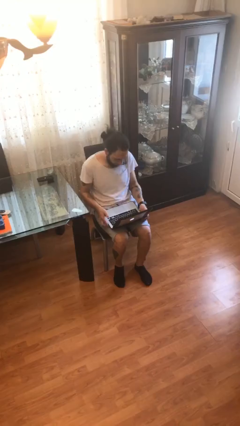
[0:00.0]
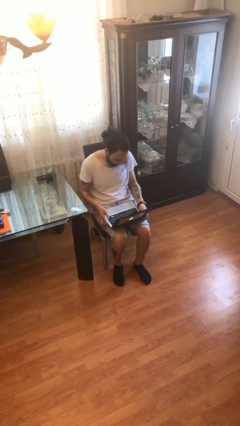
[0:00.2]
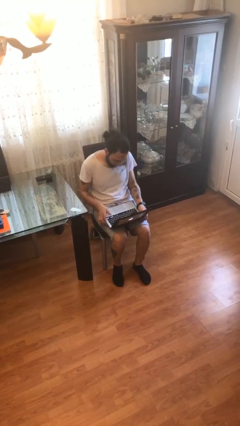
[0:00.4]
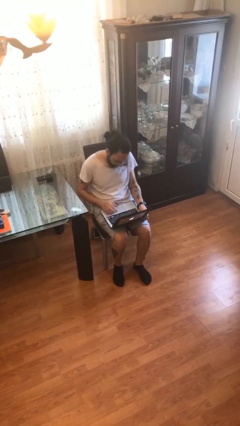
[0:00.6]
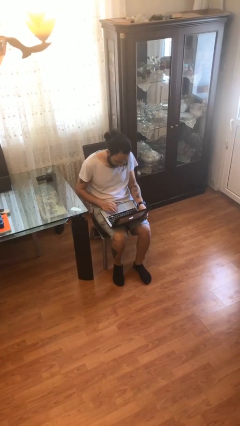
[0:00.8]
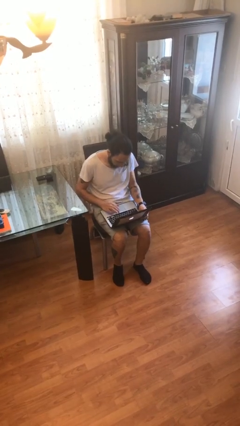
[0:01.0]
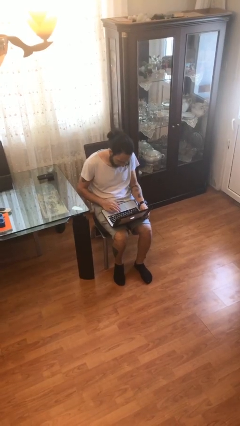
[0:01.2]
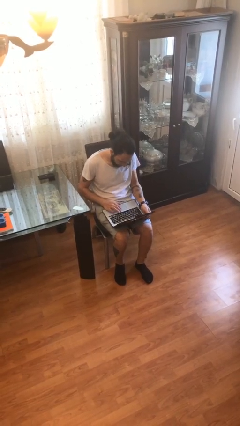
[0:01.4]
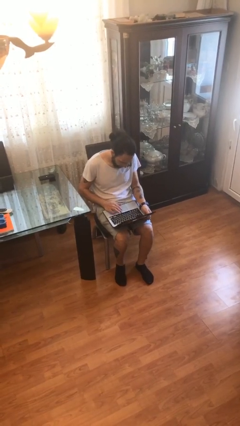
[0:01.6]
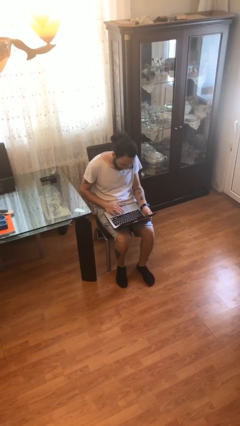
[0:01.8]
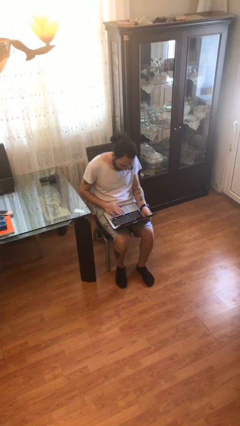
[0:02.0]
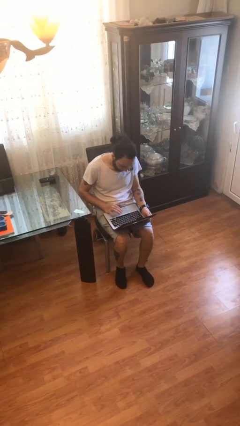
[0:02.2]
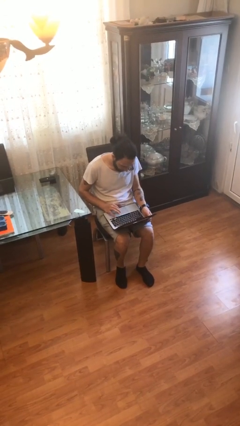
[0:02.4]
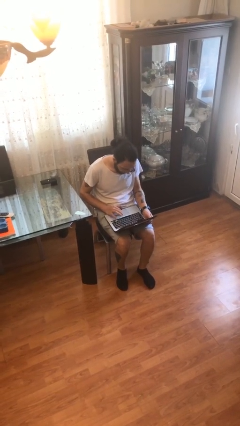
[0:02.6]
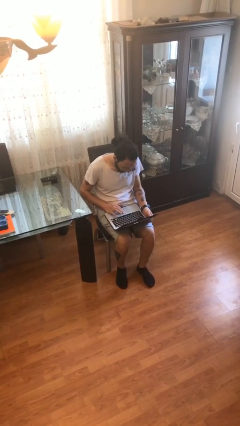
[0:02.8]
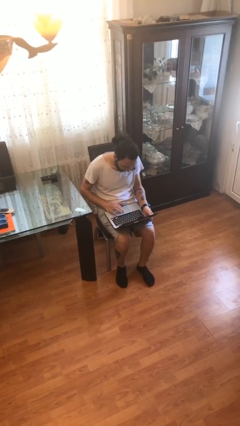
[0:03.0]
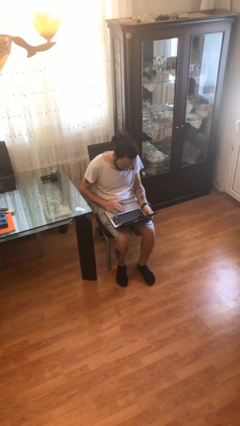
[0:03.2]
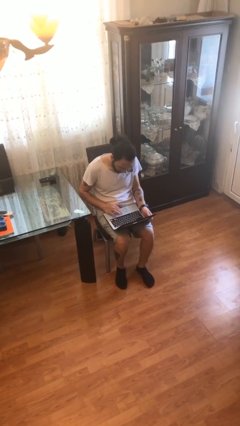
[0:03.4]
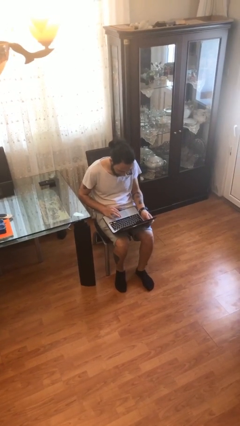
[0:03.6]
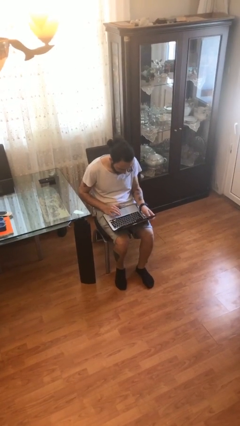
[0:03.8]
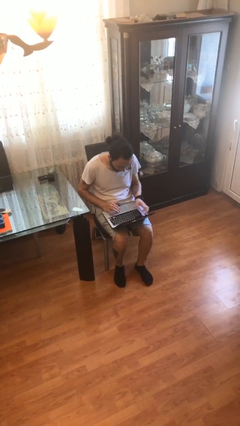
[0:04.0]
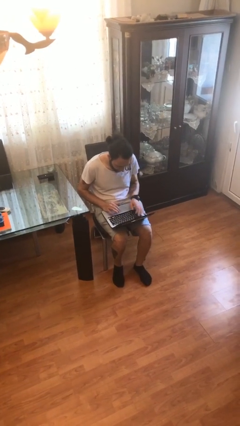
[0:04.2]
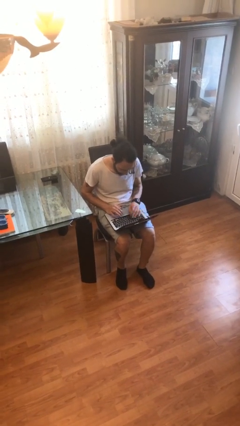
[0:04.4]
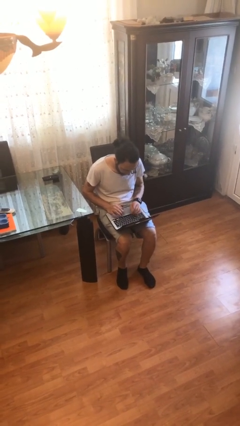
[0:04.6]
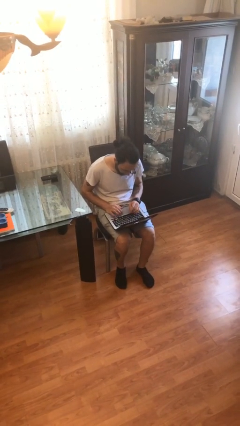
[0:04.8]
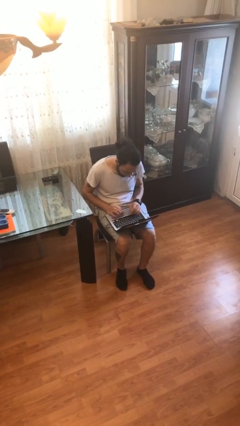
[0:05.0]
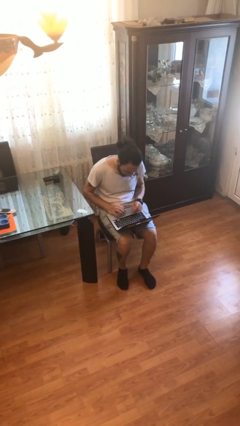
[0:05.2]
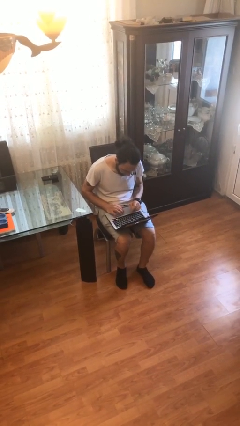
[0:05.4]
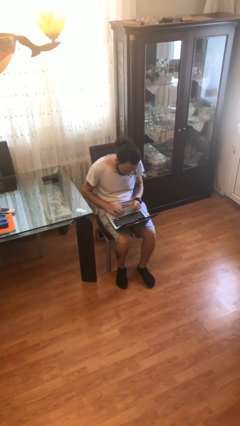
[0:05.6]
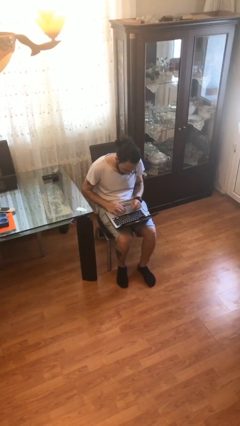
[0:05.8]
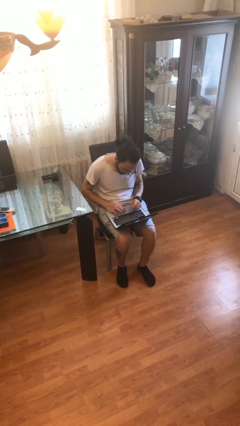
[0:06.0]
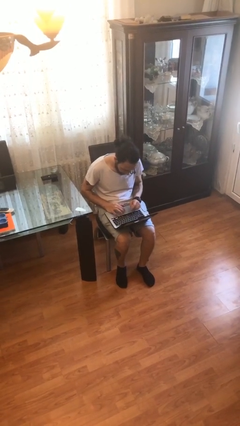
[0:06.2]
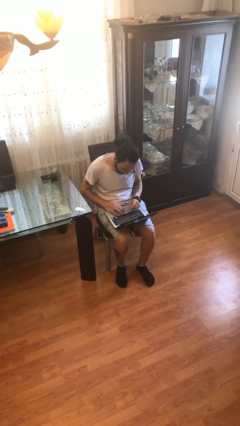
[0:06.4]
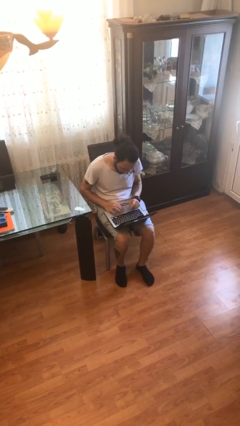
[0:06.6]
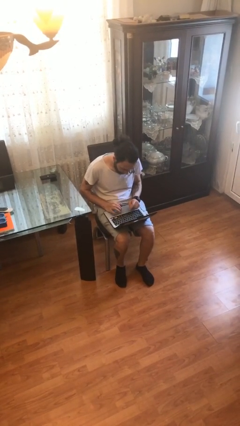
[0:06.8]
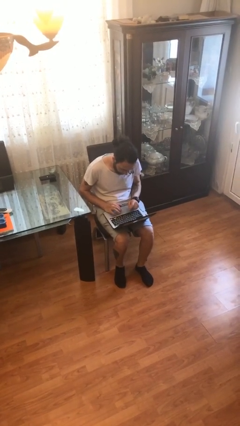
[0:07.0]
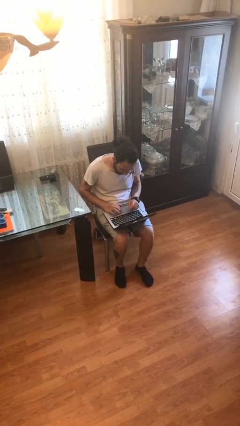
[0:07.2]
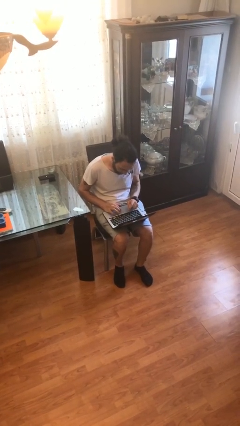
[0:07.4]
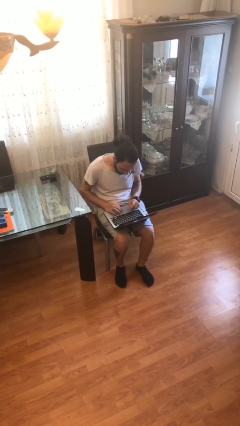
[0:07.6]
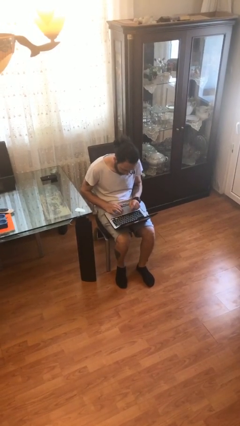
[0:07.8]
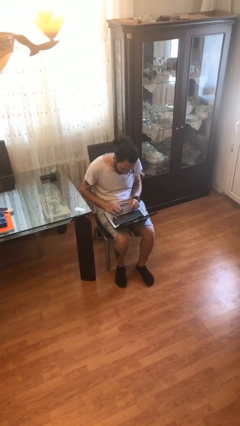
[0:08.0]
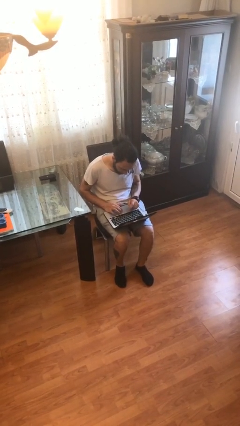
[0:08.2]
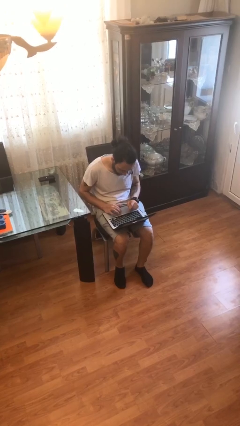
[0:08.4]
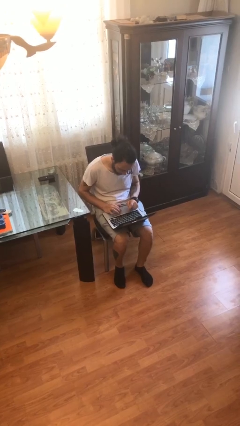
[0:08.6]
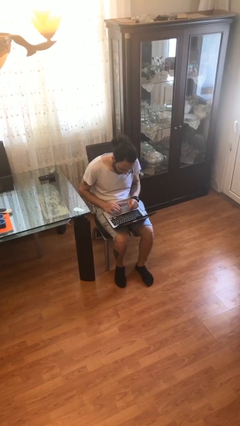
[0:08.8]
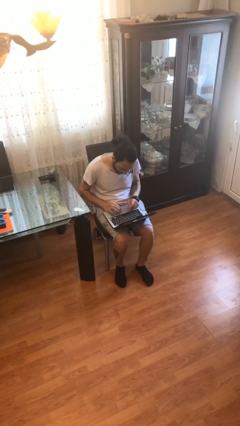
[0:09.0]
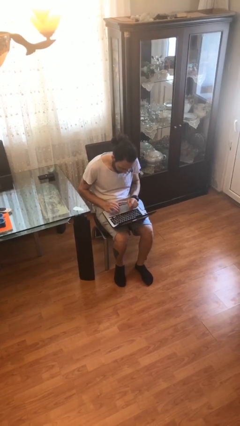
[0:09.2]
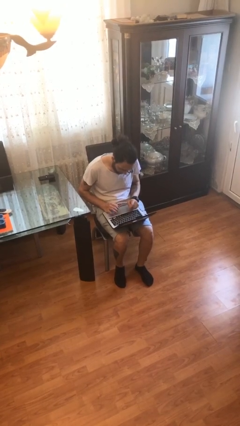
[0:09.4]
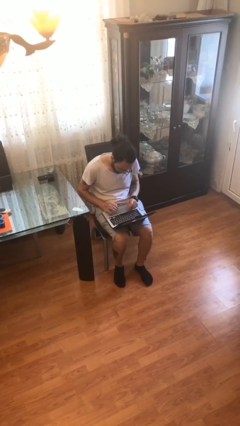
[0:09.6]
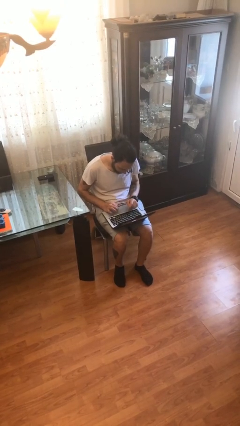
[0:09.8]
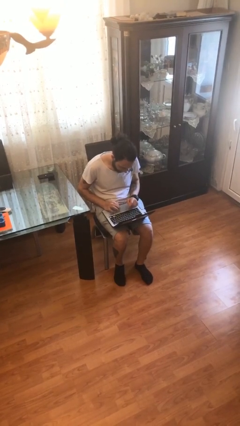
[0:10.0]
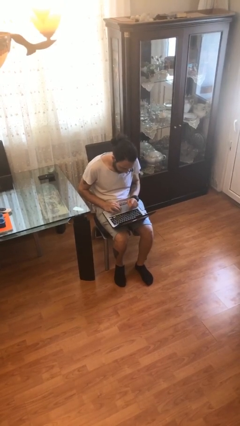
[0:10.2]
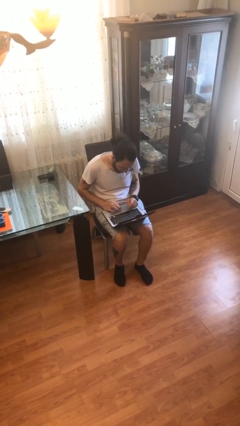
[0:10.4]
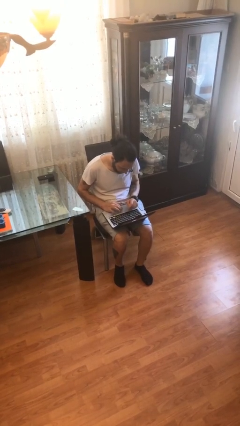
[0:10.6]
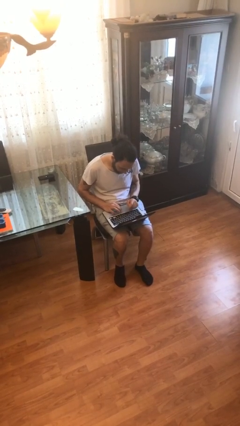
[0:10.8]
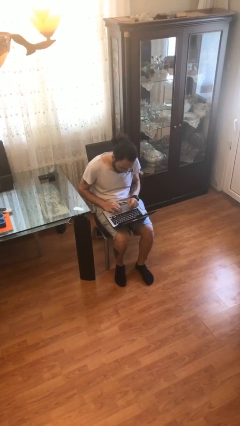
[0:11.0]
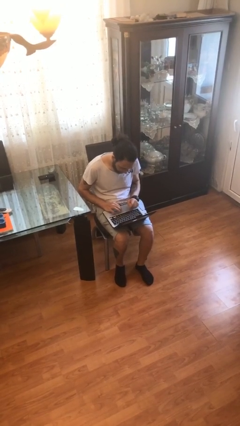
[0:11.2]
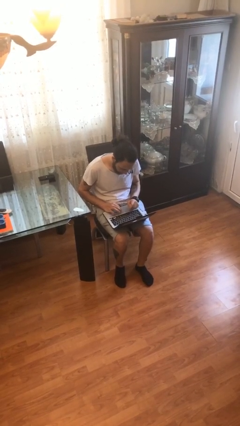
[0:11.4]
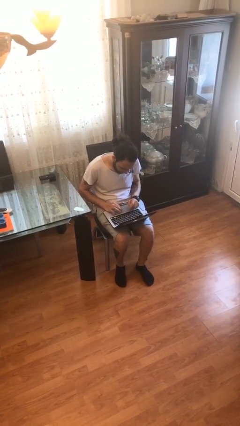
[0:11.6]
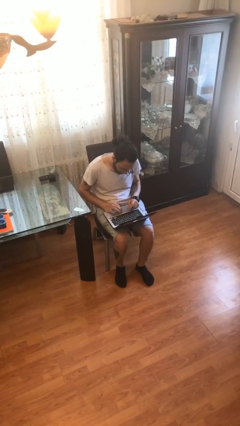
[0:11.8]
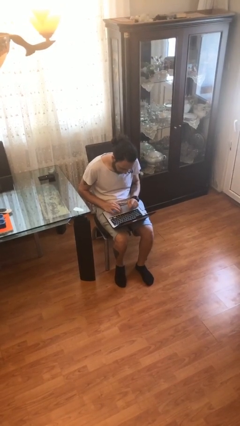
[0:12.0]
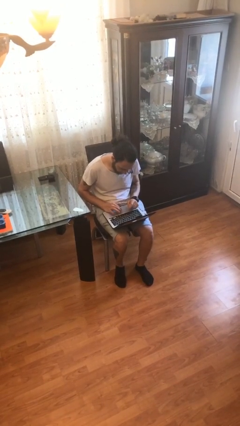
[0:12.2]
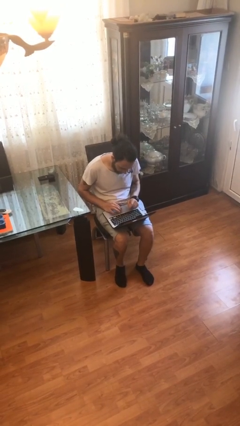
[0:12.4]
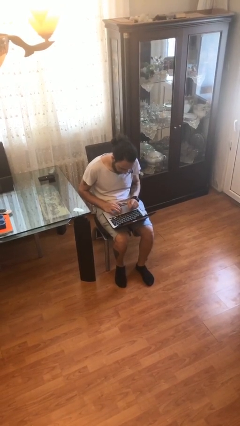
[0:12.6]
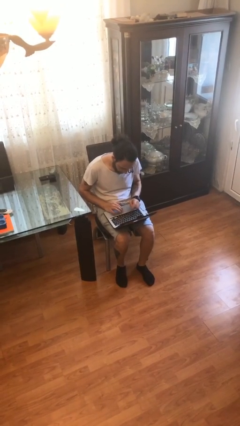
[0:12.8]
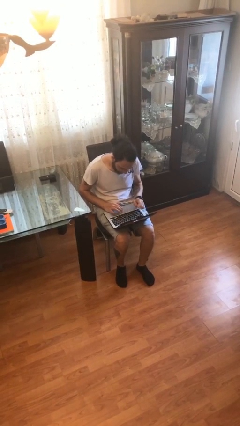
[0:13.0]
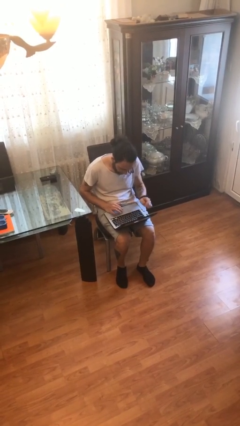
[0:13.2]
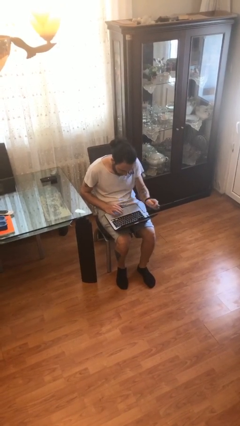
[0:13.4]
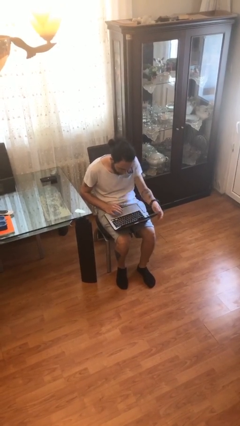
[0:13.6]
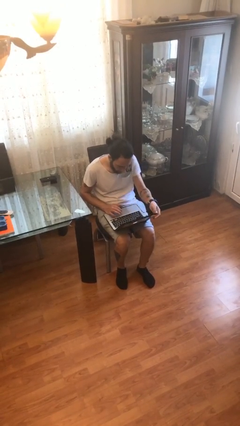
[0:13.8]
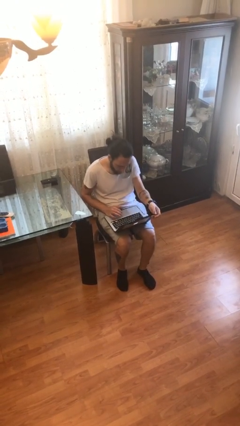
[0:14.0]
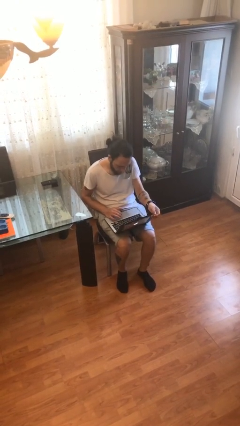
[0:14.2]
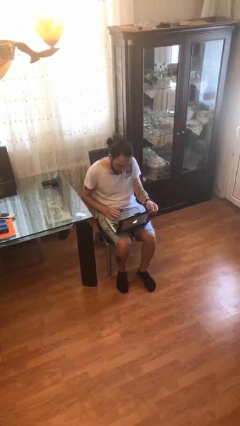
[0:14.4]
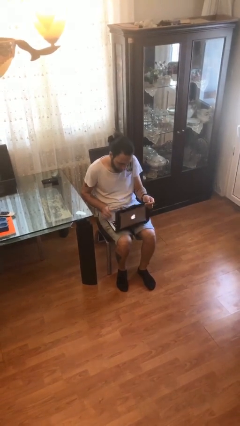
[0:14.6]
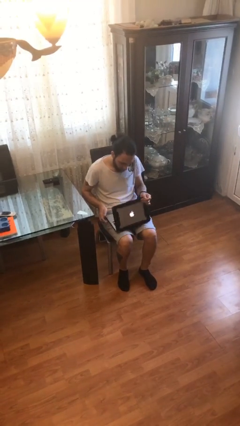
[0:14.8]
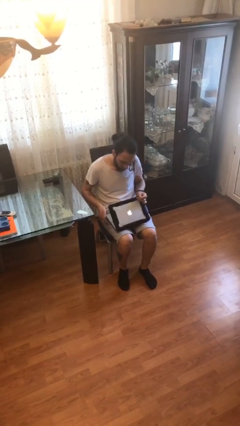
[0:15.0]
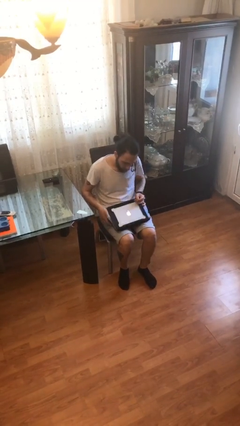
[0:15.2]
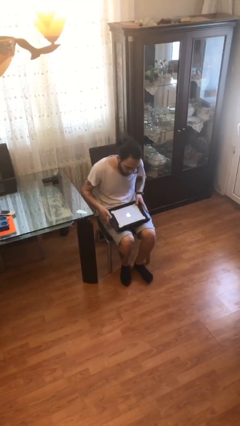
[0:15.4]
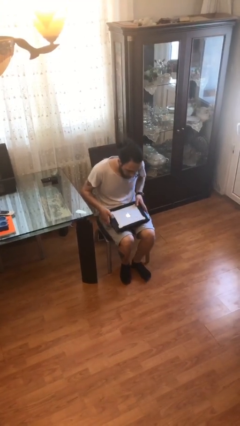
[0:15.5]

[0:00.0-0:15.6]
person interacts with laptop

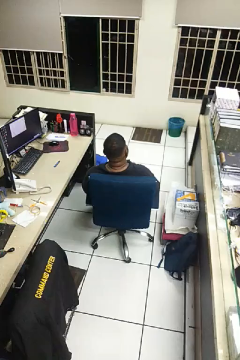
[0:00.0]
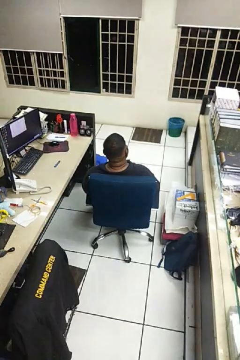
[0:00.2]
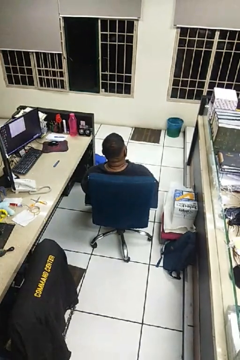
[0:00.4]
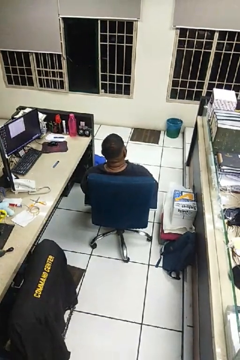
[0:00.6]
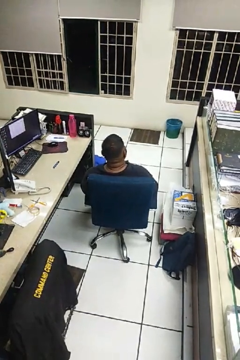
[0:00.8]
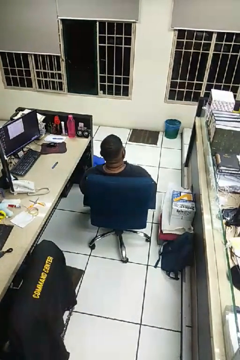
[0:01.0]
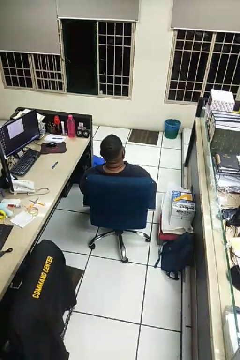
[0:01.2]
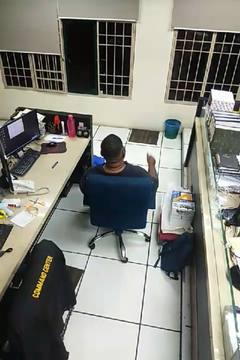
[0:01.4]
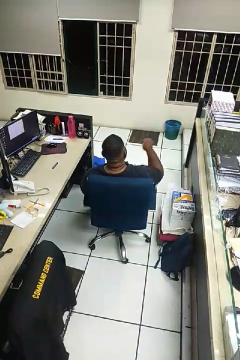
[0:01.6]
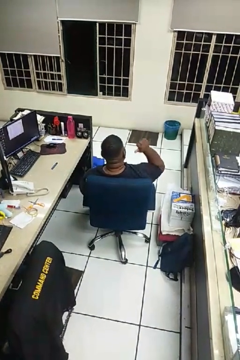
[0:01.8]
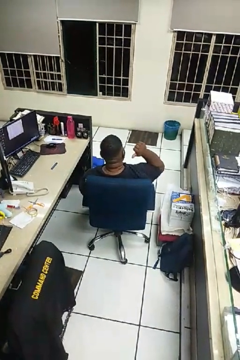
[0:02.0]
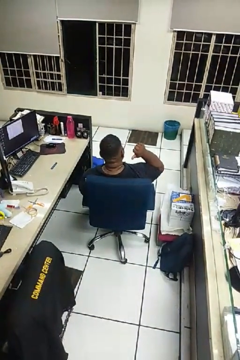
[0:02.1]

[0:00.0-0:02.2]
person gestures behind me

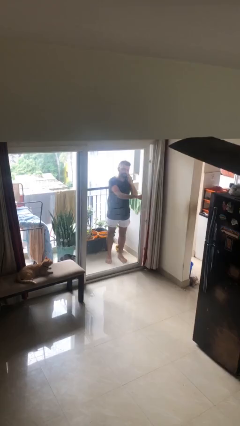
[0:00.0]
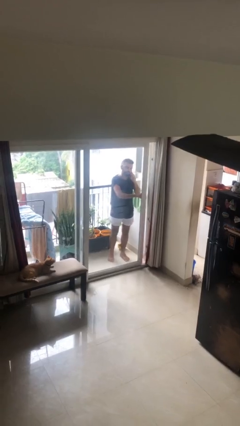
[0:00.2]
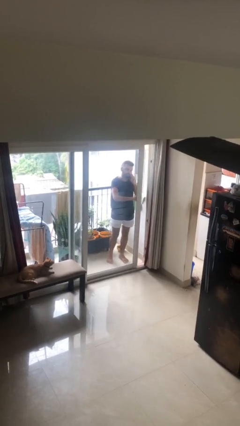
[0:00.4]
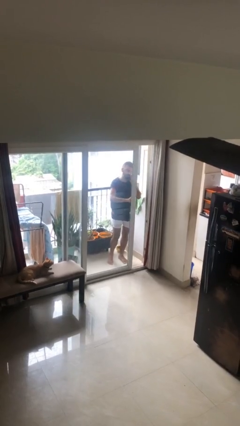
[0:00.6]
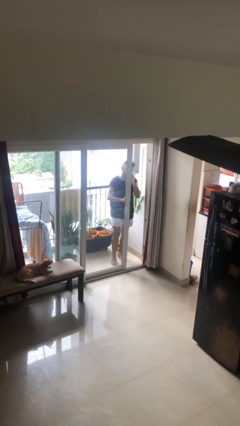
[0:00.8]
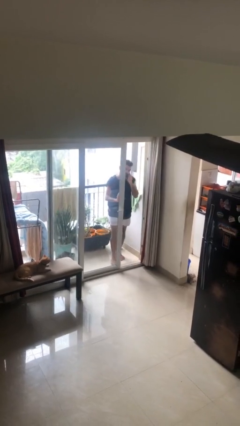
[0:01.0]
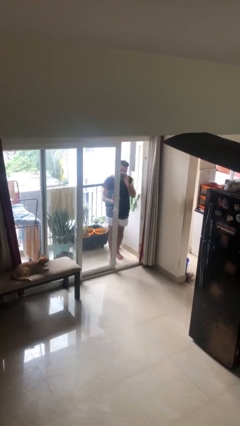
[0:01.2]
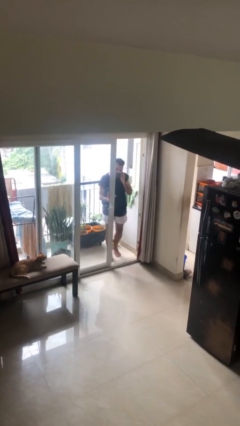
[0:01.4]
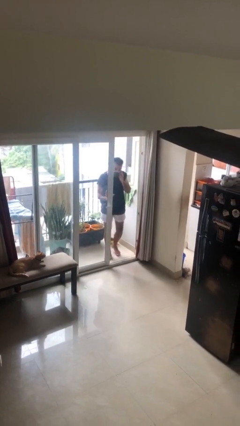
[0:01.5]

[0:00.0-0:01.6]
person opens facility door
